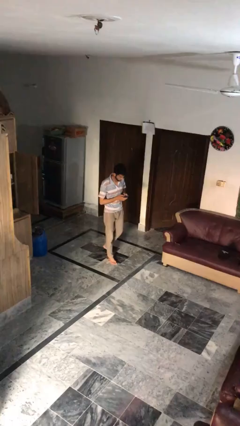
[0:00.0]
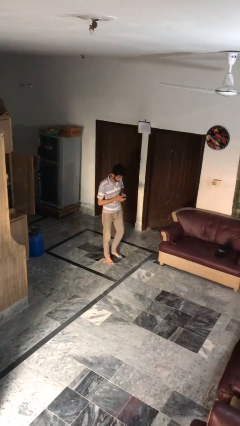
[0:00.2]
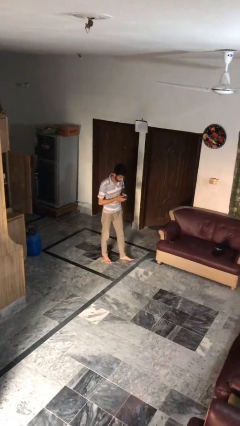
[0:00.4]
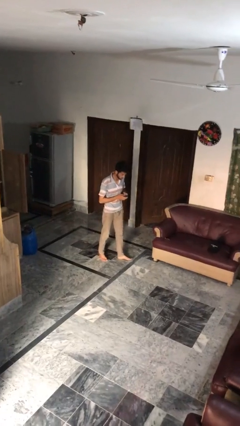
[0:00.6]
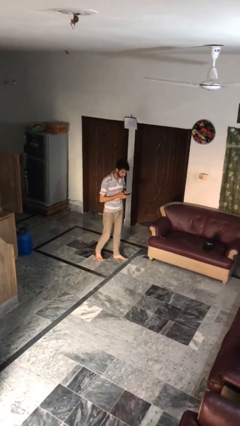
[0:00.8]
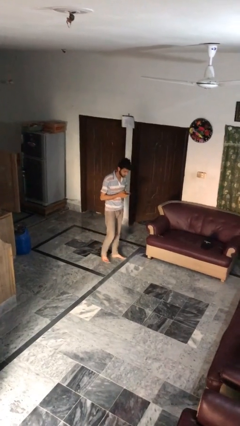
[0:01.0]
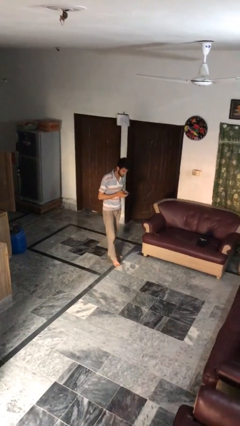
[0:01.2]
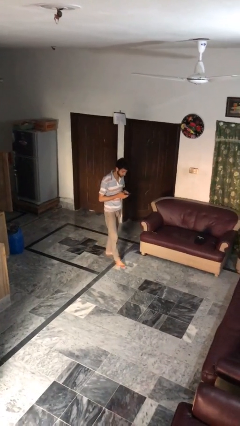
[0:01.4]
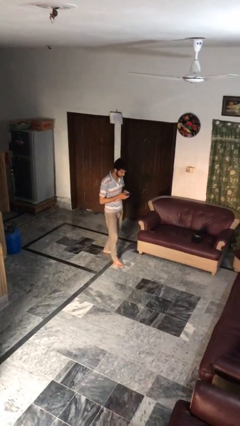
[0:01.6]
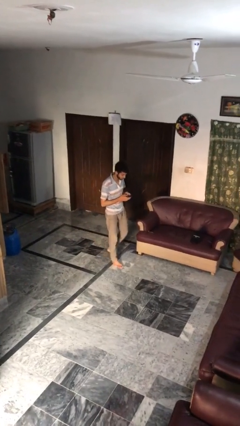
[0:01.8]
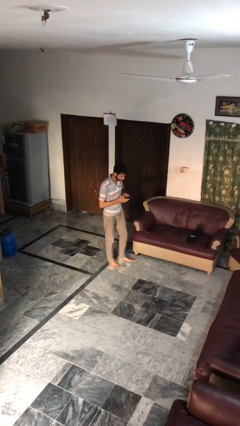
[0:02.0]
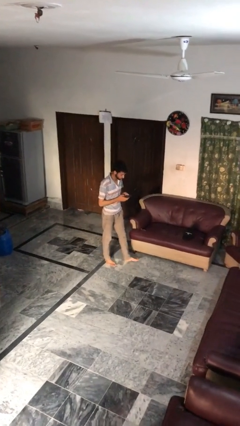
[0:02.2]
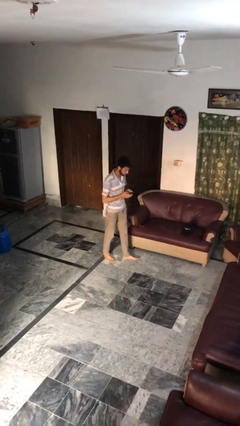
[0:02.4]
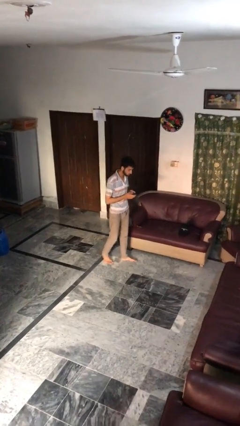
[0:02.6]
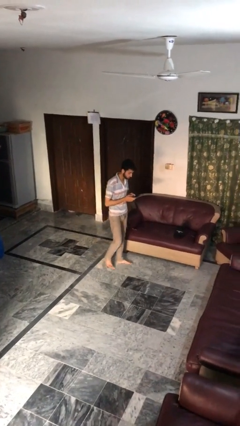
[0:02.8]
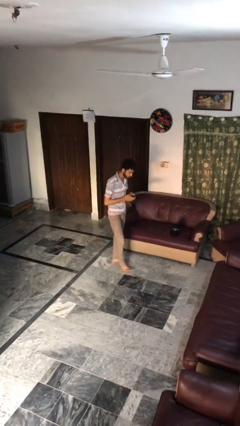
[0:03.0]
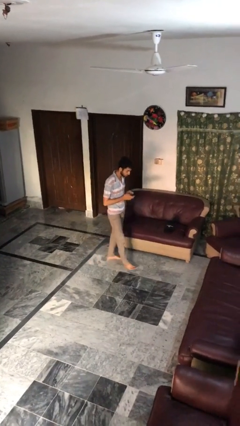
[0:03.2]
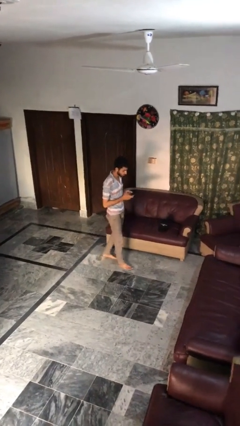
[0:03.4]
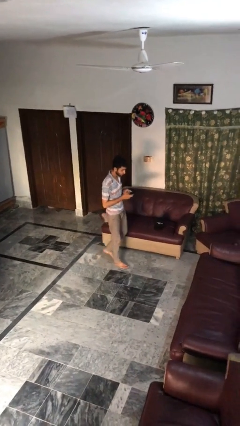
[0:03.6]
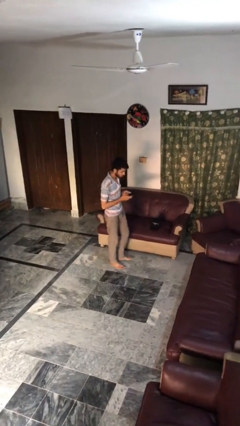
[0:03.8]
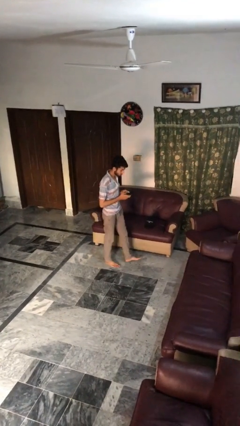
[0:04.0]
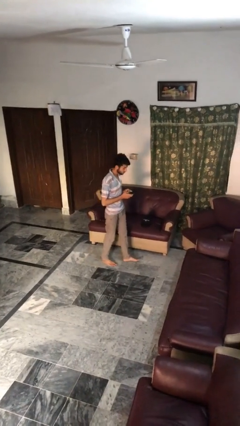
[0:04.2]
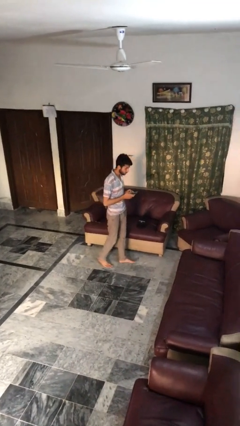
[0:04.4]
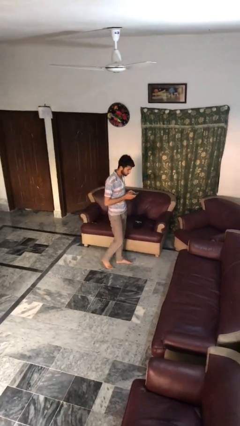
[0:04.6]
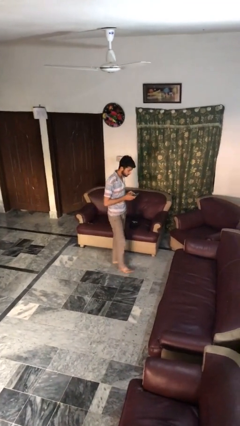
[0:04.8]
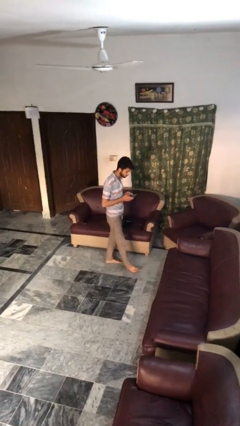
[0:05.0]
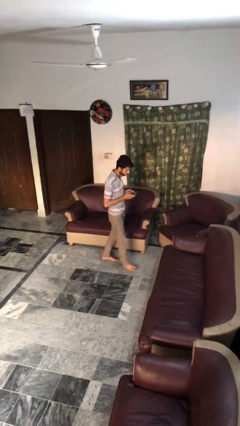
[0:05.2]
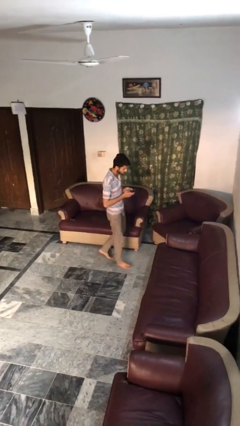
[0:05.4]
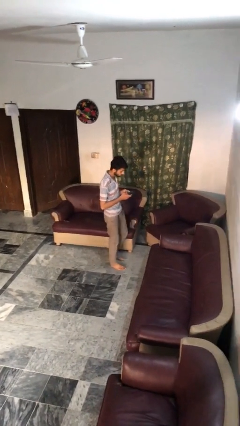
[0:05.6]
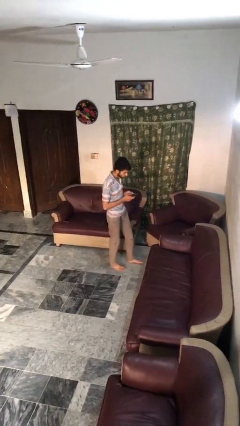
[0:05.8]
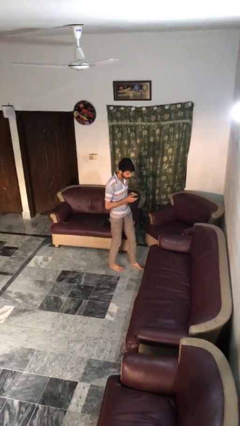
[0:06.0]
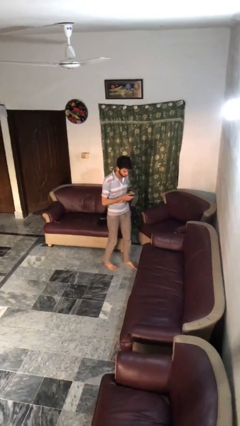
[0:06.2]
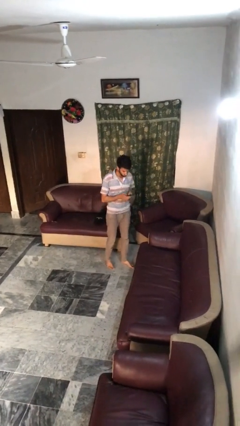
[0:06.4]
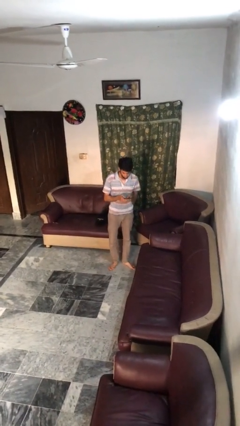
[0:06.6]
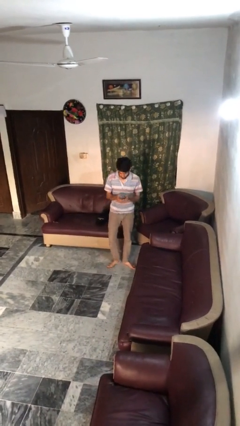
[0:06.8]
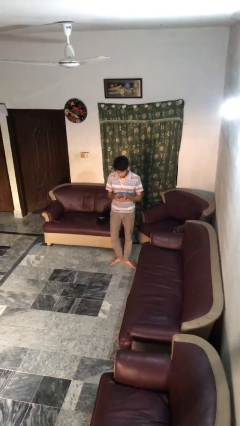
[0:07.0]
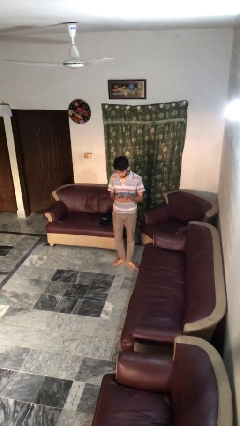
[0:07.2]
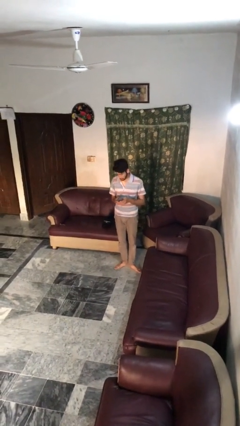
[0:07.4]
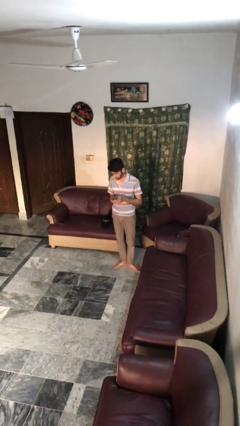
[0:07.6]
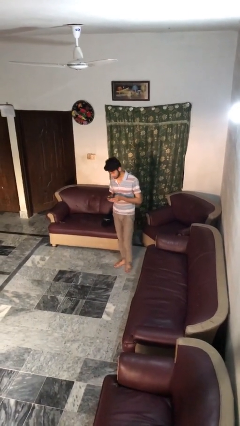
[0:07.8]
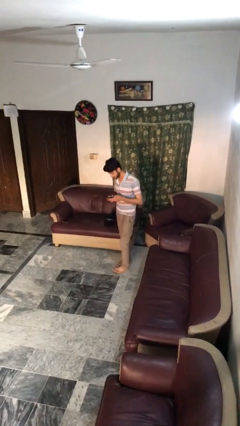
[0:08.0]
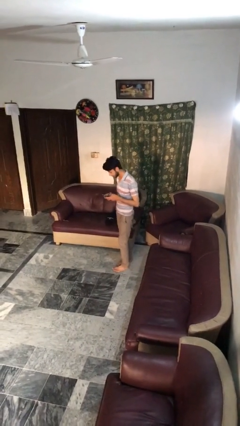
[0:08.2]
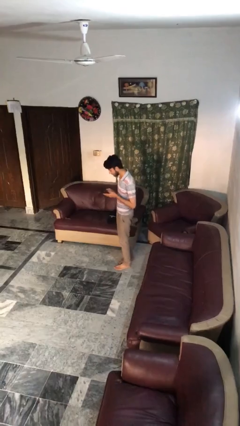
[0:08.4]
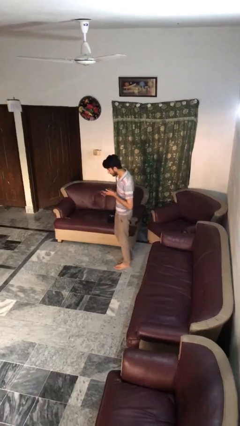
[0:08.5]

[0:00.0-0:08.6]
person texts on phone

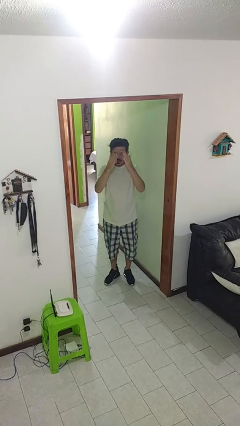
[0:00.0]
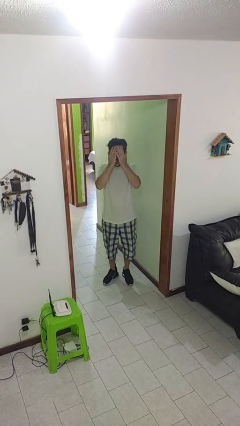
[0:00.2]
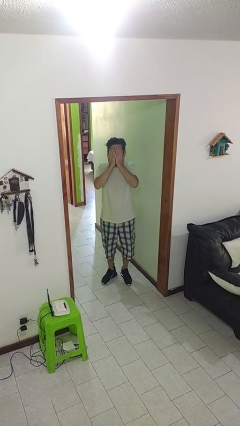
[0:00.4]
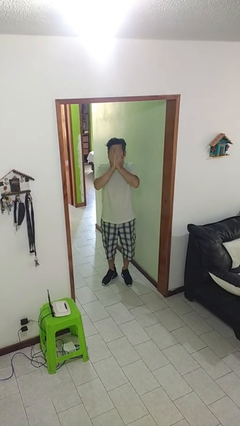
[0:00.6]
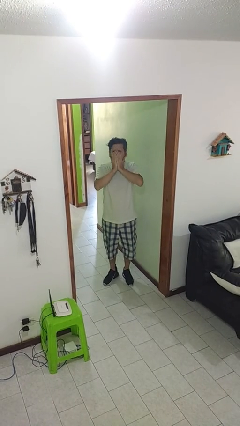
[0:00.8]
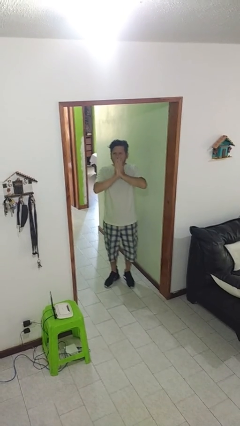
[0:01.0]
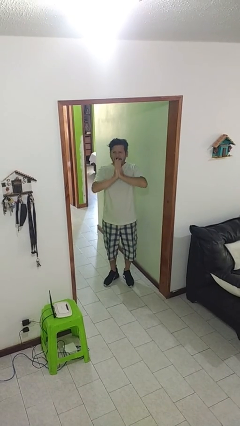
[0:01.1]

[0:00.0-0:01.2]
person covers face with hands

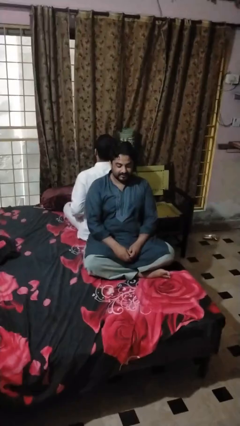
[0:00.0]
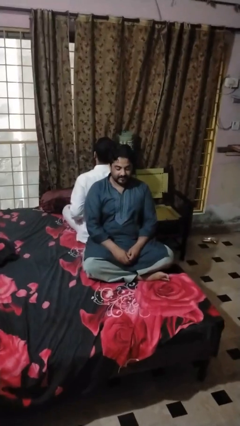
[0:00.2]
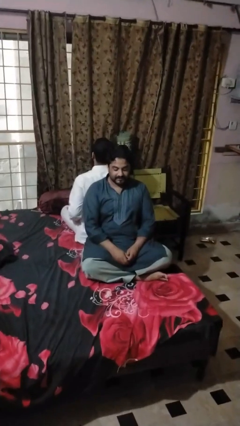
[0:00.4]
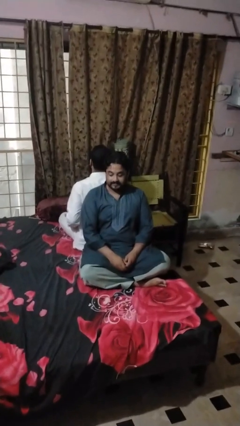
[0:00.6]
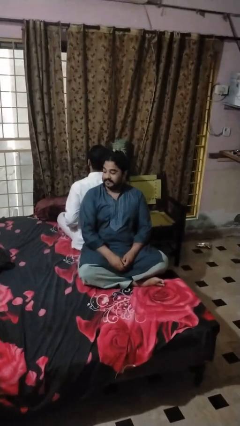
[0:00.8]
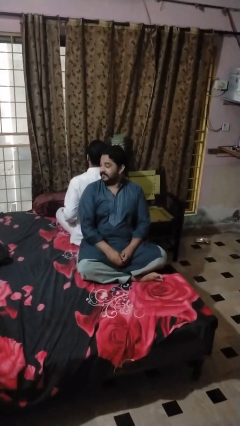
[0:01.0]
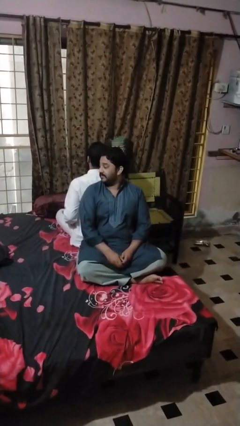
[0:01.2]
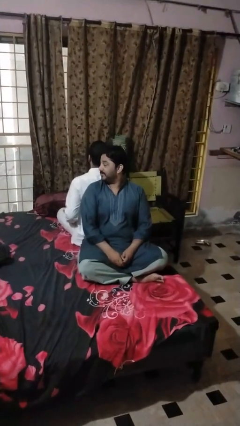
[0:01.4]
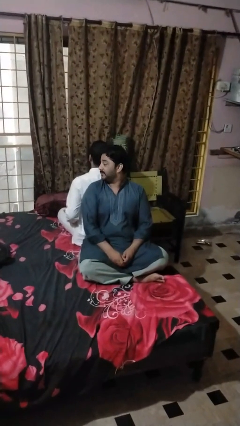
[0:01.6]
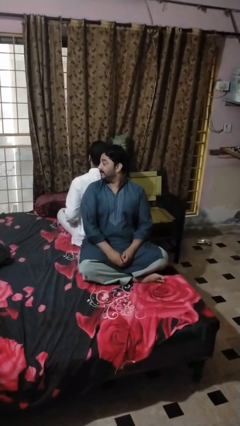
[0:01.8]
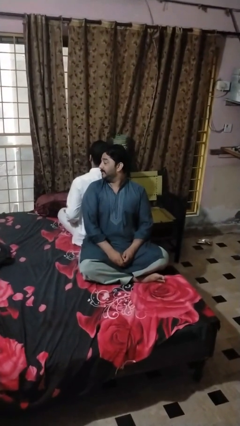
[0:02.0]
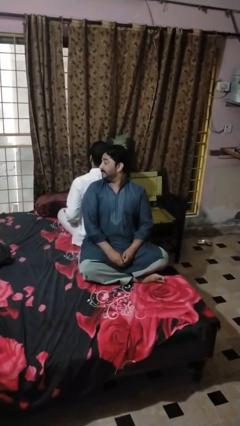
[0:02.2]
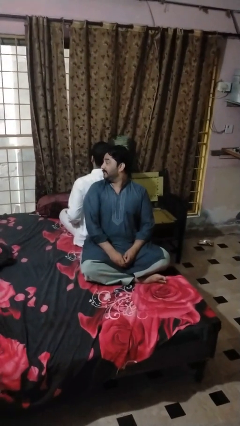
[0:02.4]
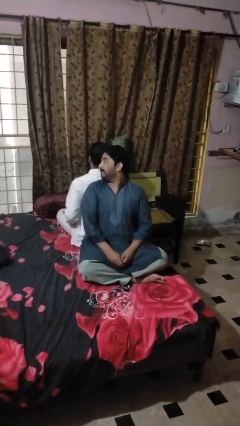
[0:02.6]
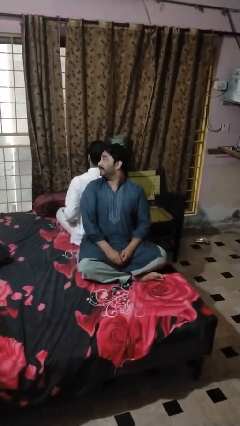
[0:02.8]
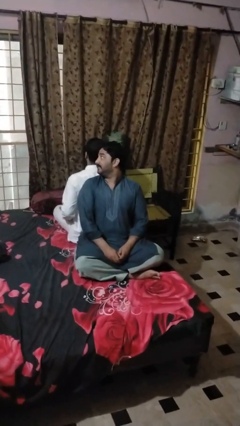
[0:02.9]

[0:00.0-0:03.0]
person looks over shoulder

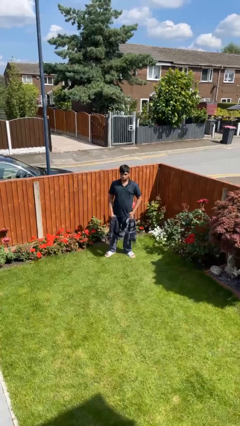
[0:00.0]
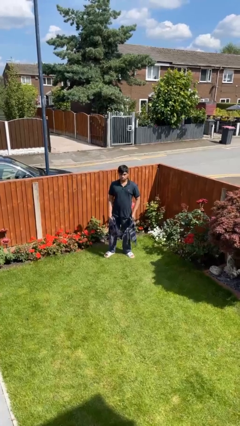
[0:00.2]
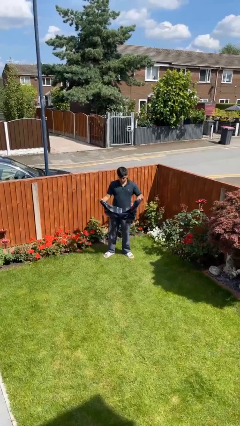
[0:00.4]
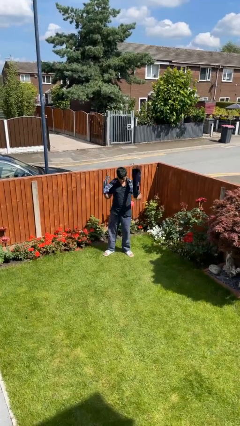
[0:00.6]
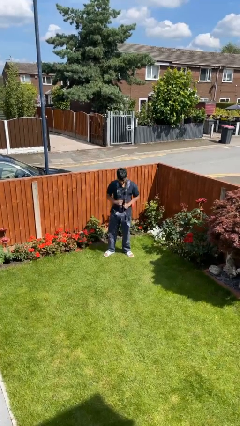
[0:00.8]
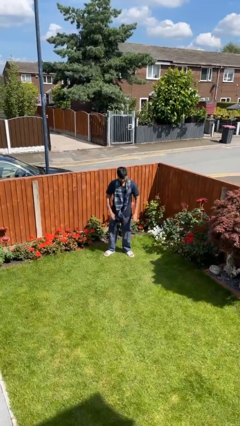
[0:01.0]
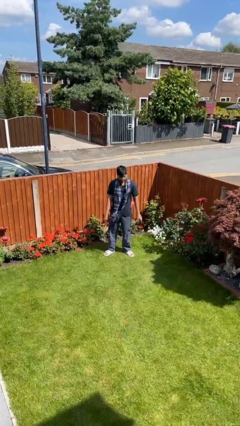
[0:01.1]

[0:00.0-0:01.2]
person puts on scarf

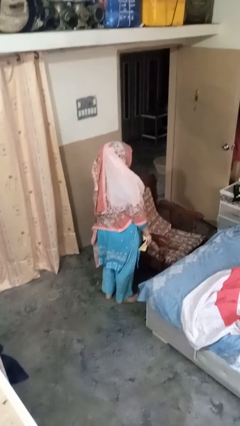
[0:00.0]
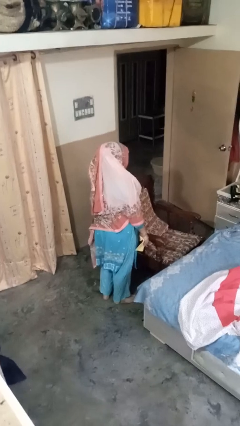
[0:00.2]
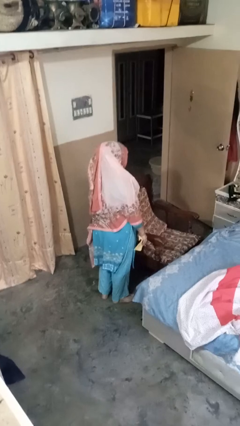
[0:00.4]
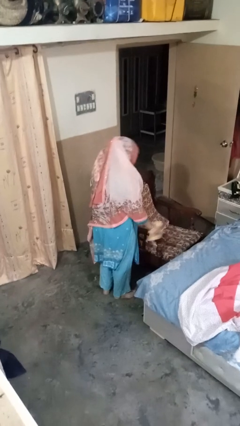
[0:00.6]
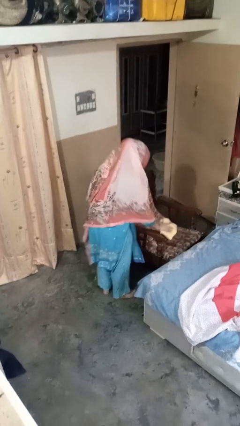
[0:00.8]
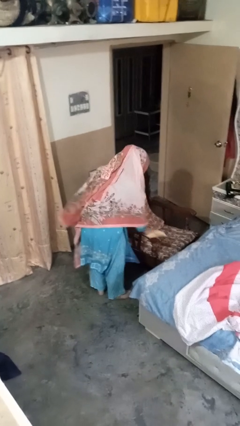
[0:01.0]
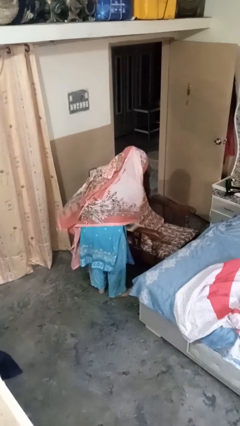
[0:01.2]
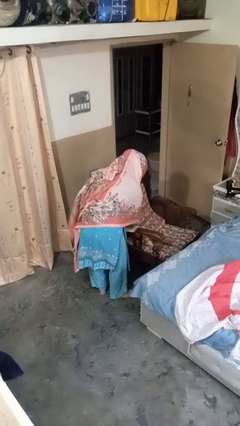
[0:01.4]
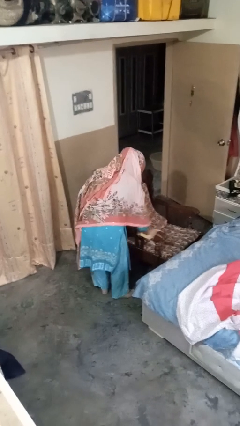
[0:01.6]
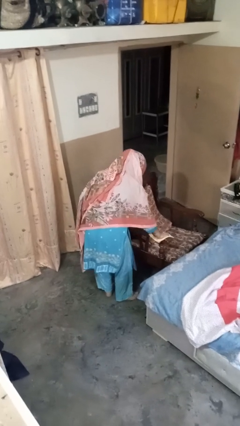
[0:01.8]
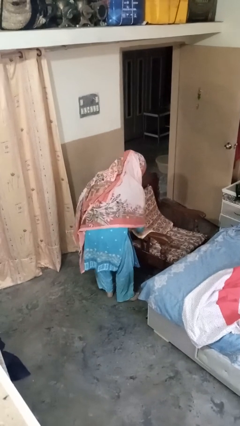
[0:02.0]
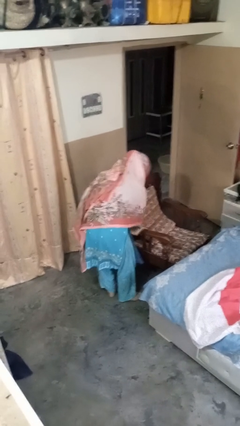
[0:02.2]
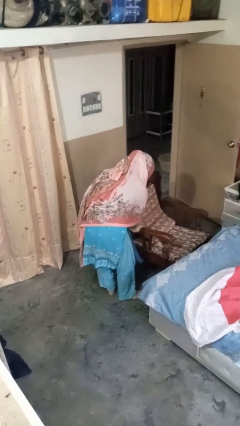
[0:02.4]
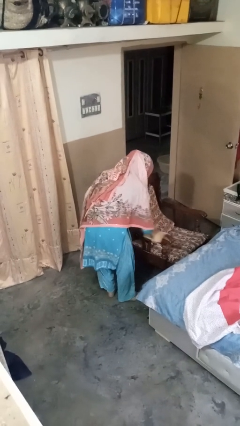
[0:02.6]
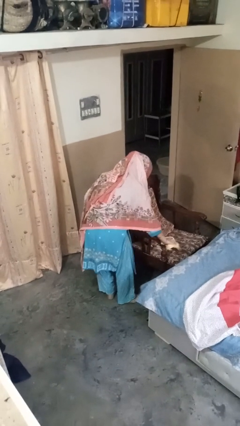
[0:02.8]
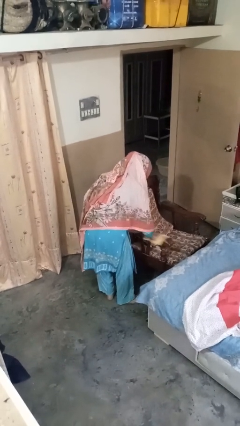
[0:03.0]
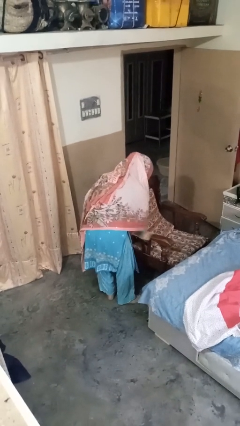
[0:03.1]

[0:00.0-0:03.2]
person dusts furniture

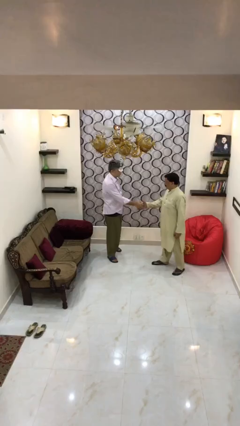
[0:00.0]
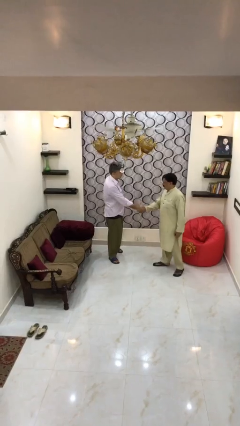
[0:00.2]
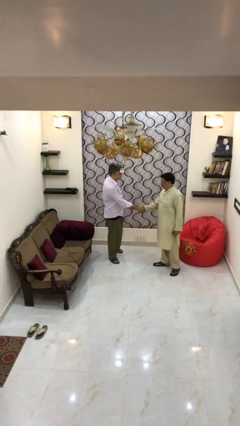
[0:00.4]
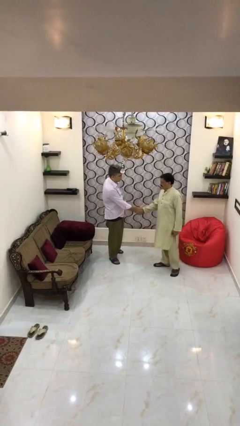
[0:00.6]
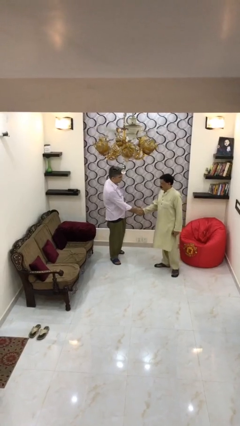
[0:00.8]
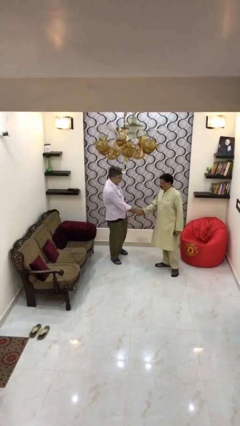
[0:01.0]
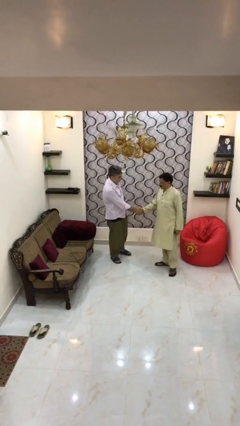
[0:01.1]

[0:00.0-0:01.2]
person shakes hand
